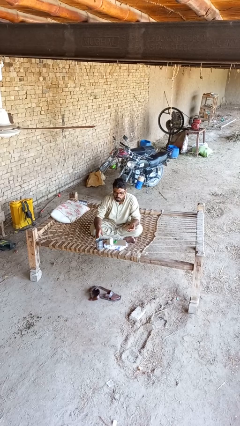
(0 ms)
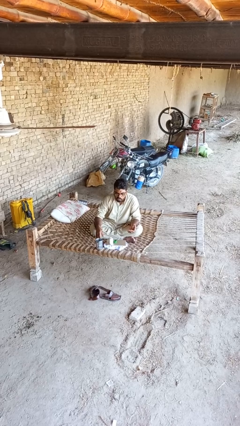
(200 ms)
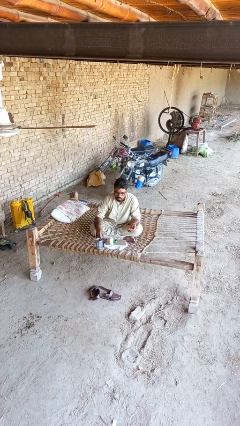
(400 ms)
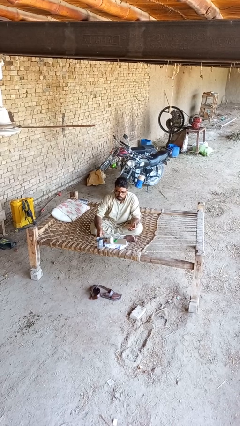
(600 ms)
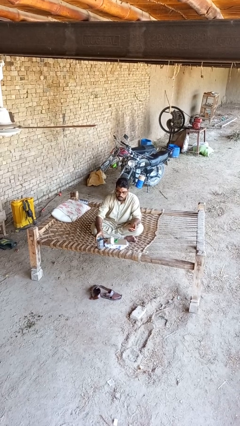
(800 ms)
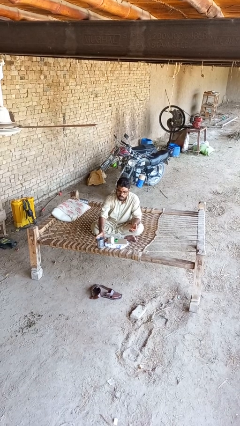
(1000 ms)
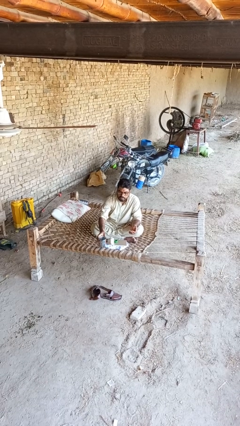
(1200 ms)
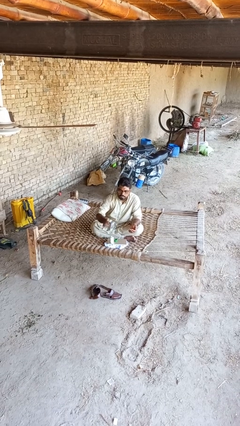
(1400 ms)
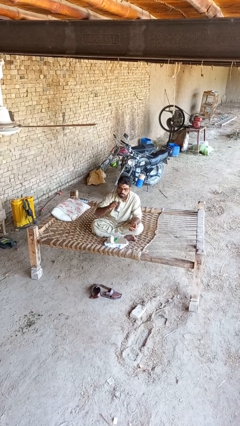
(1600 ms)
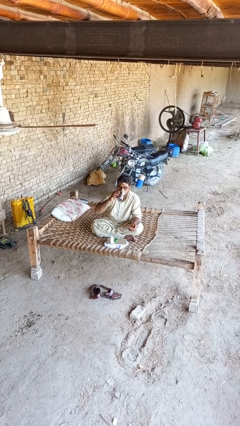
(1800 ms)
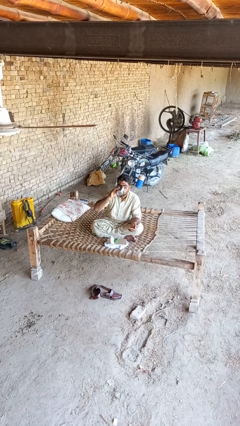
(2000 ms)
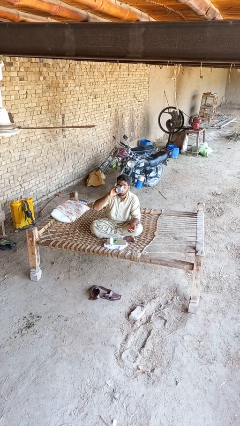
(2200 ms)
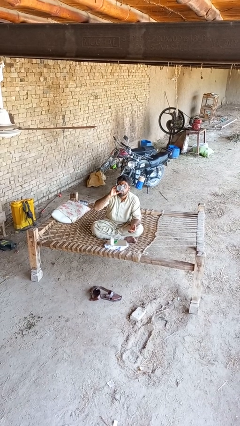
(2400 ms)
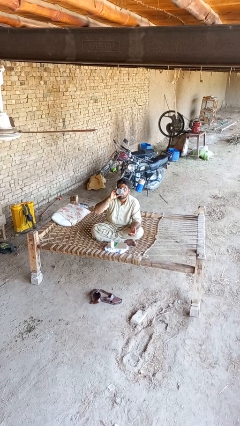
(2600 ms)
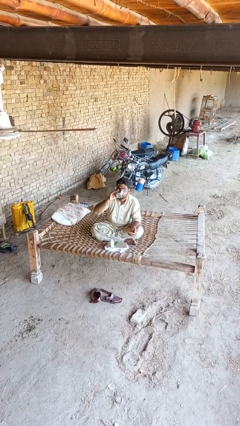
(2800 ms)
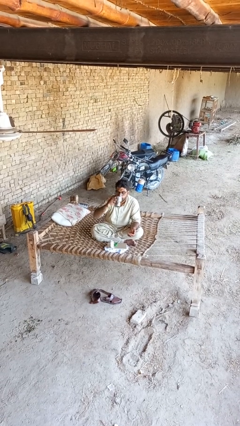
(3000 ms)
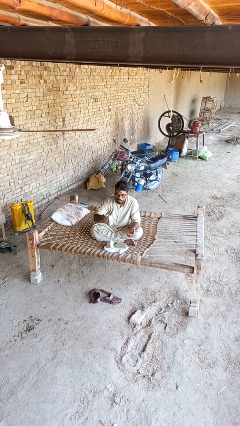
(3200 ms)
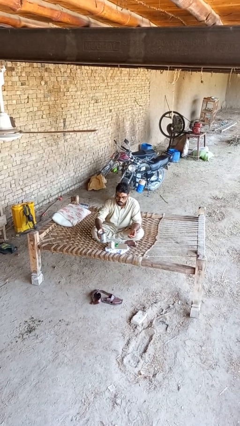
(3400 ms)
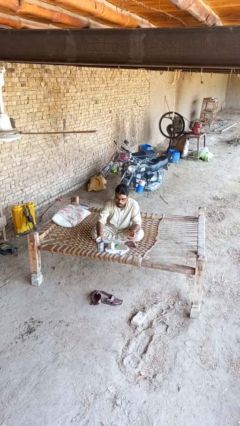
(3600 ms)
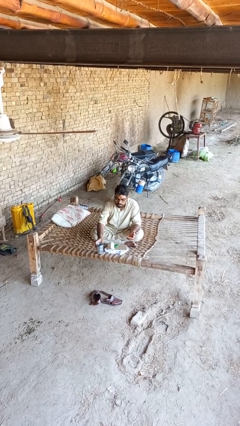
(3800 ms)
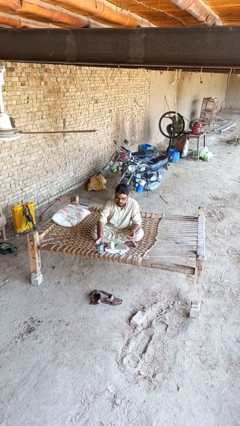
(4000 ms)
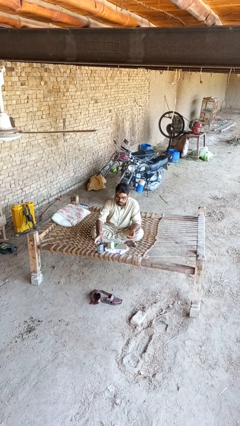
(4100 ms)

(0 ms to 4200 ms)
person drinks from cup

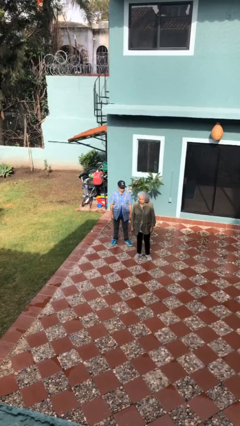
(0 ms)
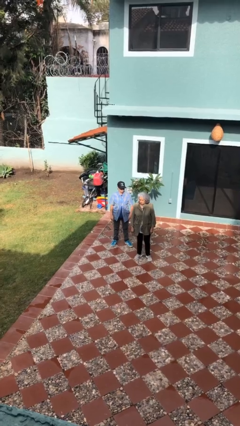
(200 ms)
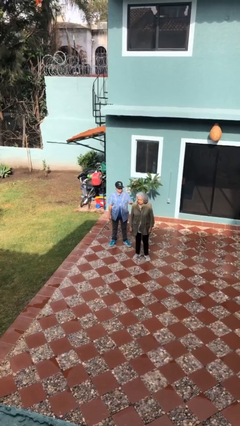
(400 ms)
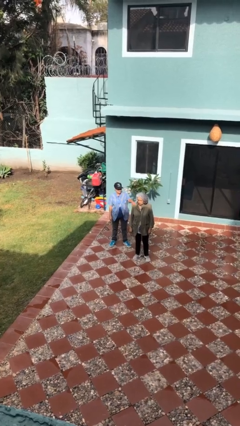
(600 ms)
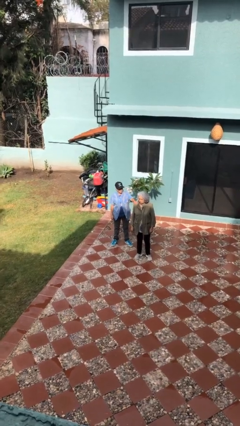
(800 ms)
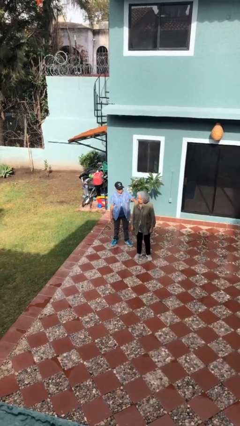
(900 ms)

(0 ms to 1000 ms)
person grabs person by shoulder

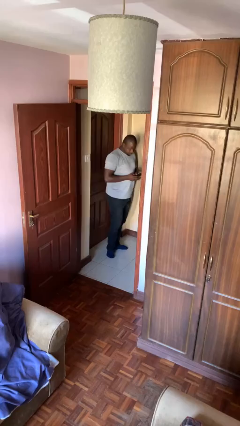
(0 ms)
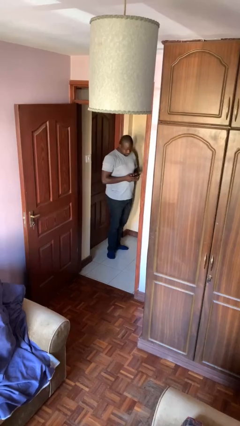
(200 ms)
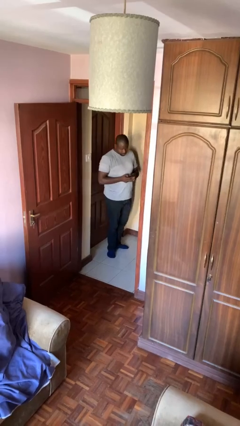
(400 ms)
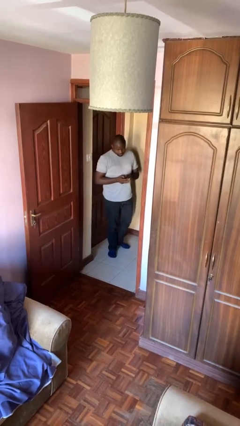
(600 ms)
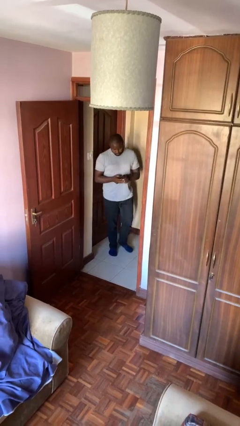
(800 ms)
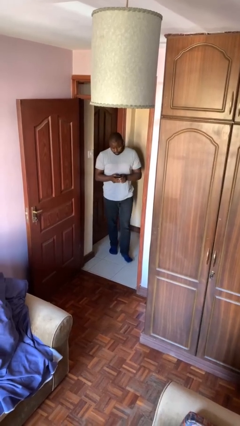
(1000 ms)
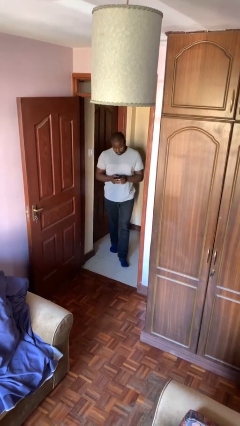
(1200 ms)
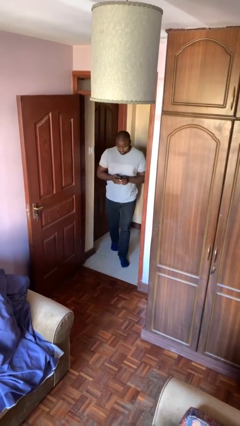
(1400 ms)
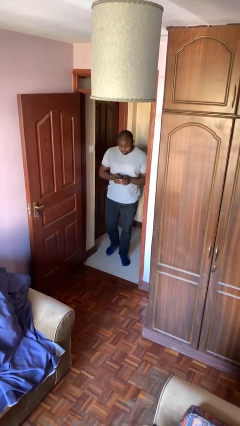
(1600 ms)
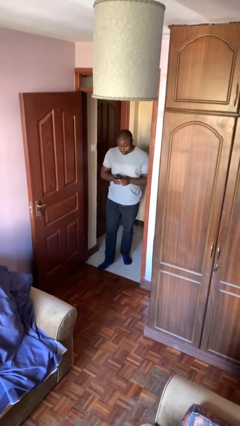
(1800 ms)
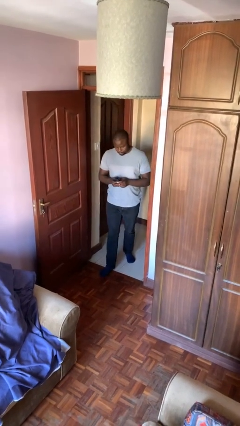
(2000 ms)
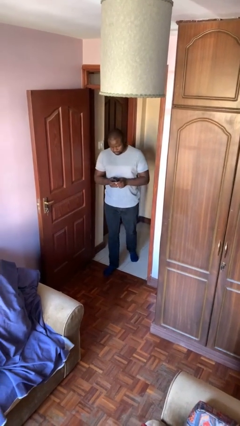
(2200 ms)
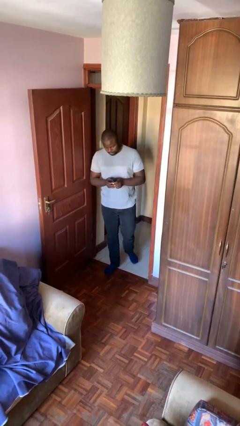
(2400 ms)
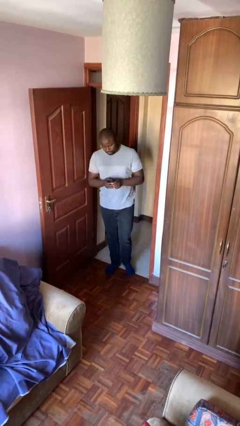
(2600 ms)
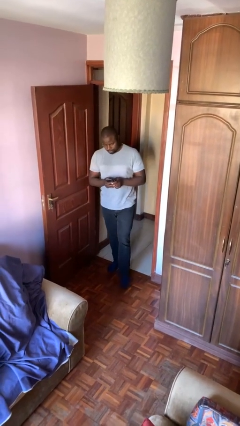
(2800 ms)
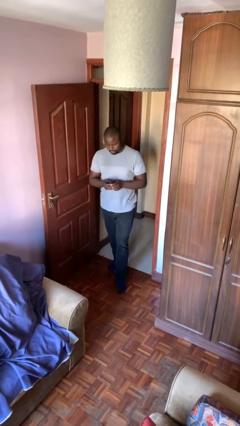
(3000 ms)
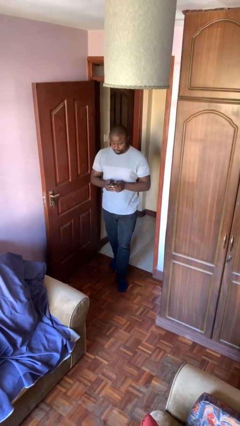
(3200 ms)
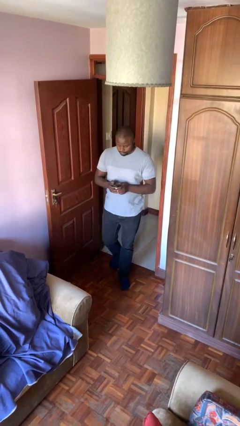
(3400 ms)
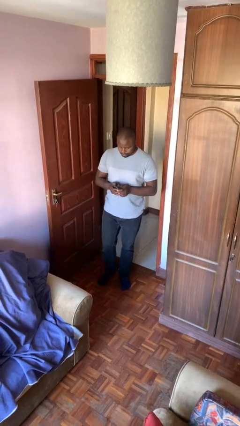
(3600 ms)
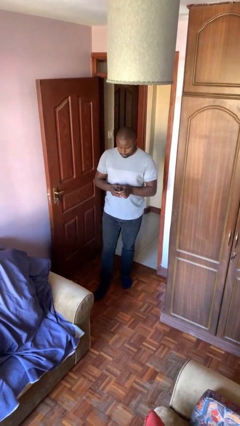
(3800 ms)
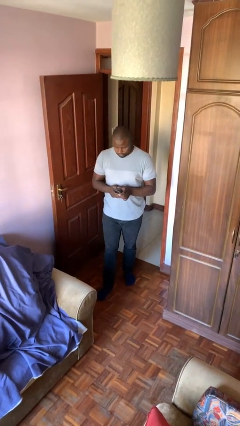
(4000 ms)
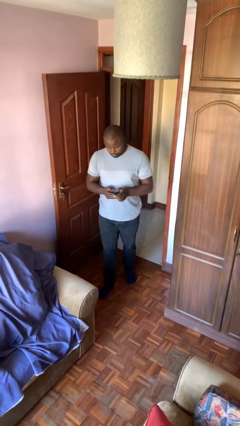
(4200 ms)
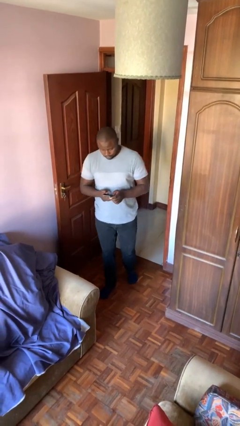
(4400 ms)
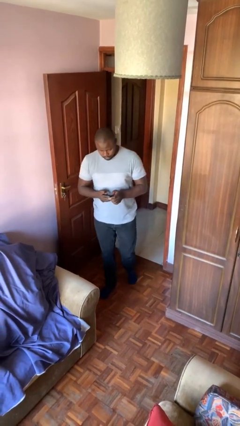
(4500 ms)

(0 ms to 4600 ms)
person enters scene through structure

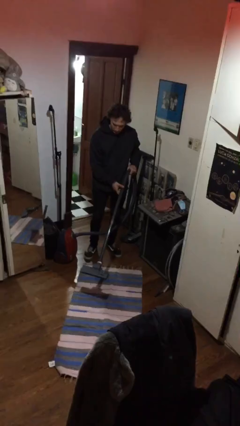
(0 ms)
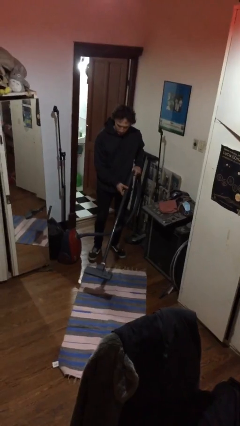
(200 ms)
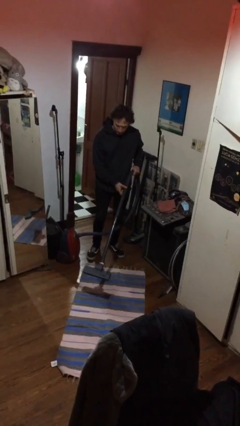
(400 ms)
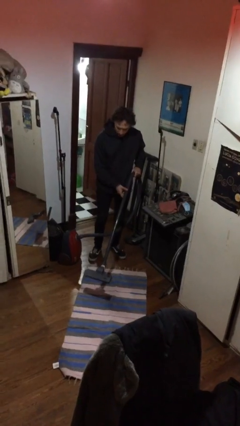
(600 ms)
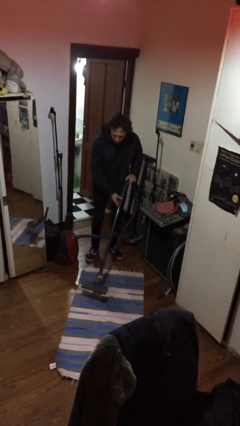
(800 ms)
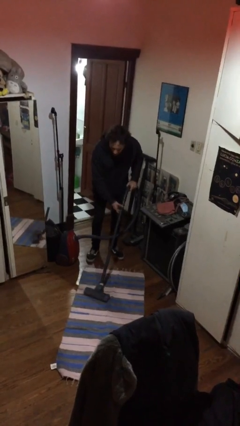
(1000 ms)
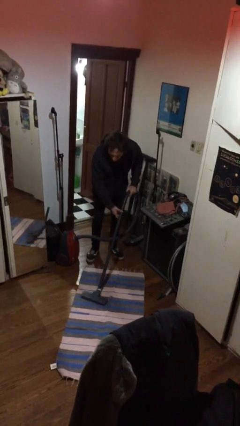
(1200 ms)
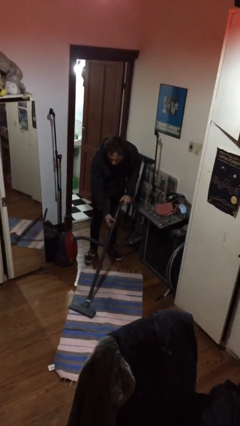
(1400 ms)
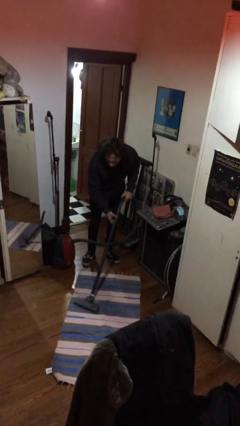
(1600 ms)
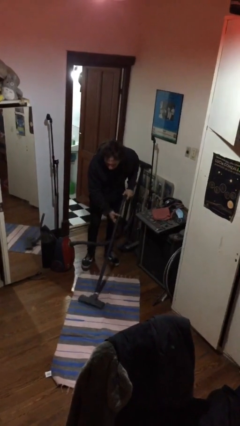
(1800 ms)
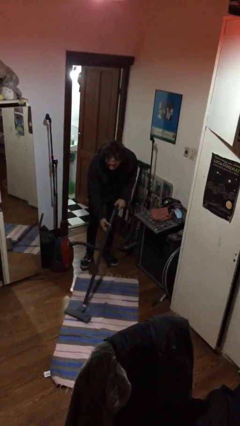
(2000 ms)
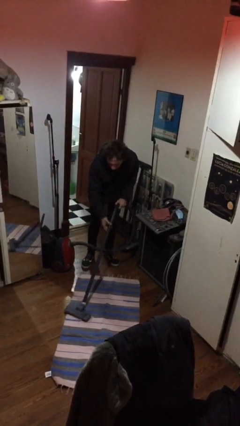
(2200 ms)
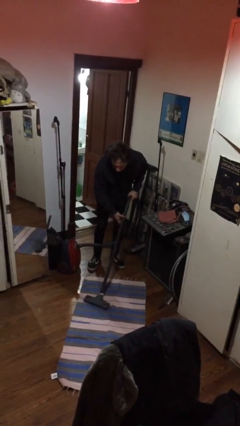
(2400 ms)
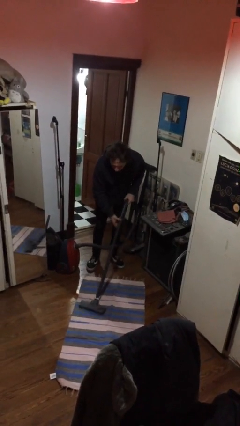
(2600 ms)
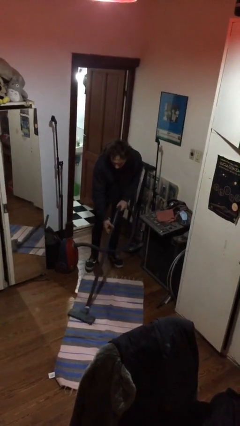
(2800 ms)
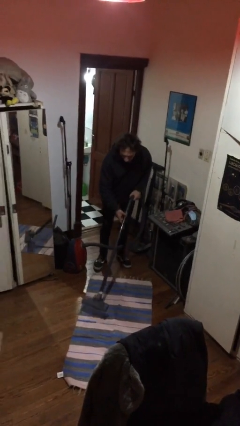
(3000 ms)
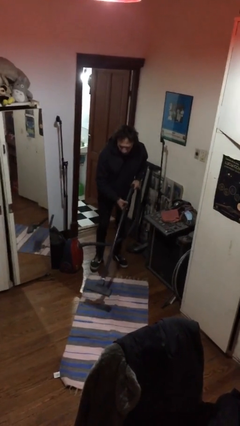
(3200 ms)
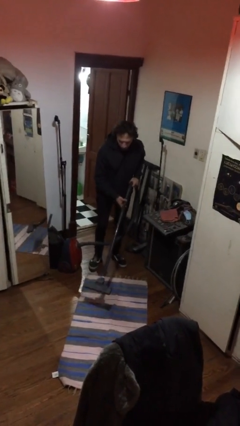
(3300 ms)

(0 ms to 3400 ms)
person vacuums carpet

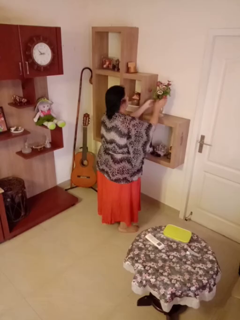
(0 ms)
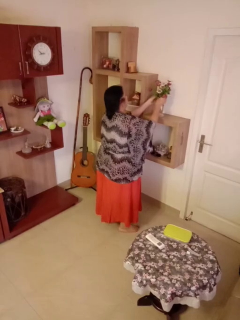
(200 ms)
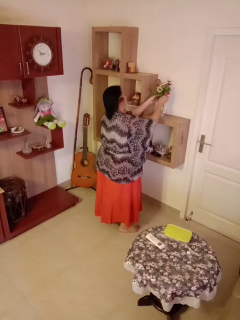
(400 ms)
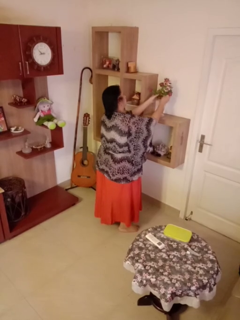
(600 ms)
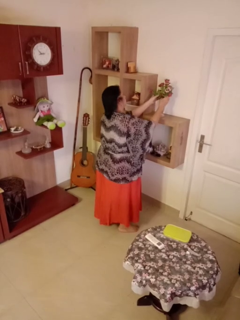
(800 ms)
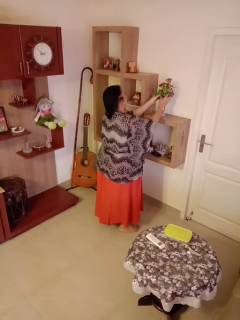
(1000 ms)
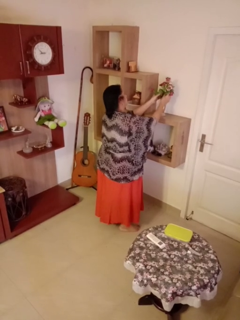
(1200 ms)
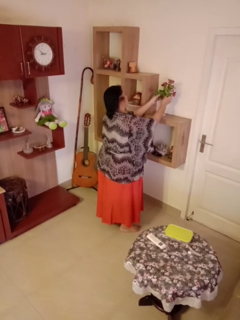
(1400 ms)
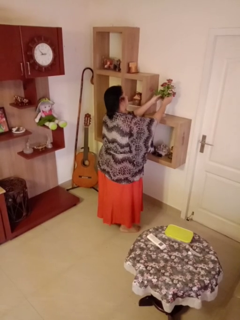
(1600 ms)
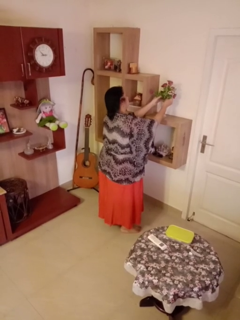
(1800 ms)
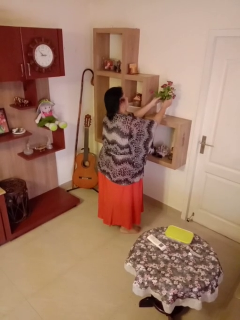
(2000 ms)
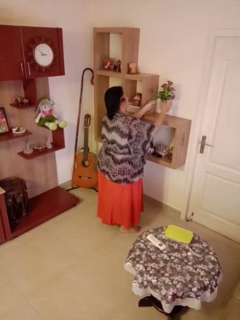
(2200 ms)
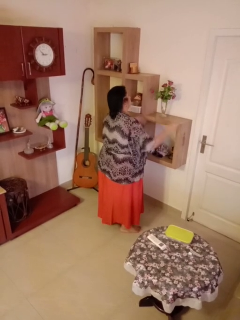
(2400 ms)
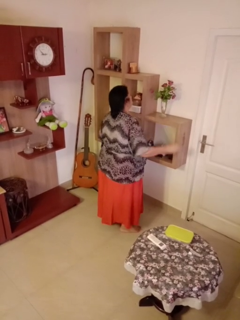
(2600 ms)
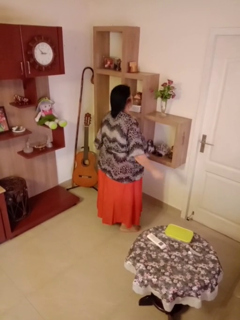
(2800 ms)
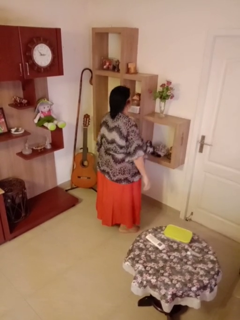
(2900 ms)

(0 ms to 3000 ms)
person arranges flowers in vase

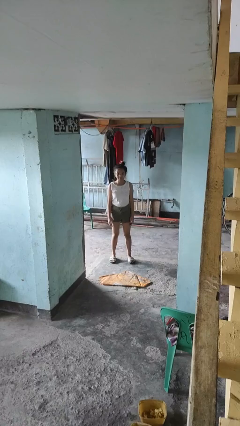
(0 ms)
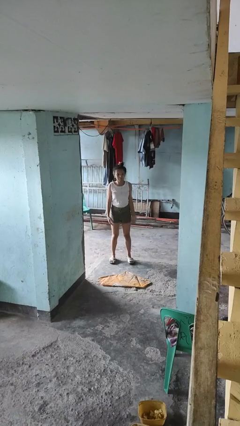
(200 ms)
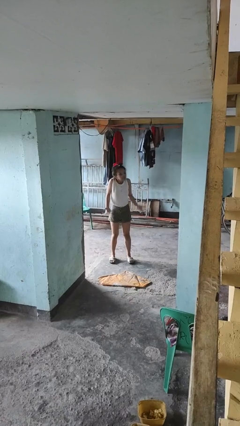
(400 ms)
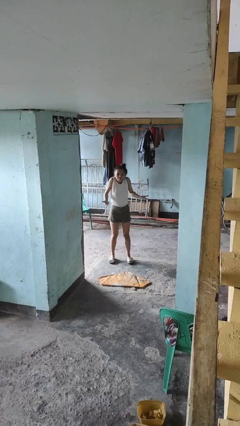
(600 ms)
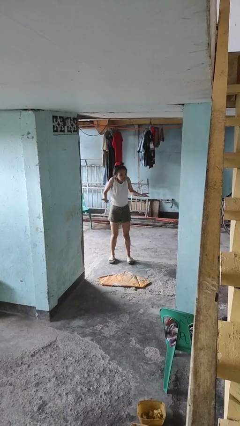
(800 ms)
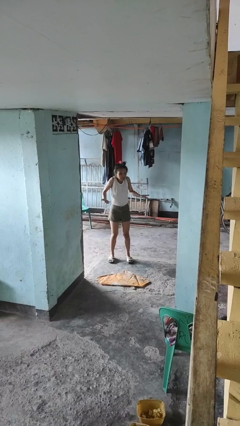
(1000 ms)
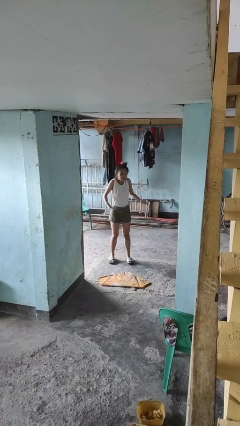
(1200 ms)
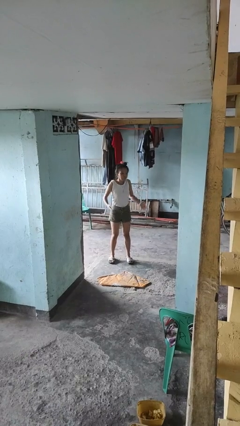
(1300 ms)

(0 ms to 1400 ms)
person shrugs

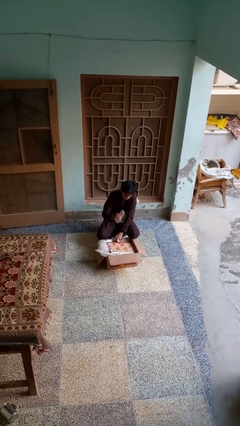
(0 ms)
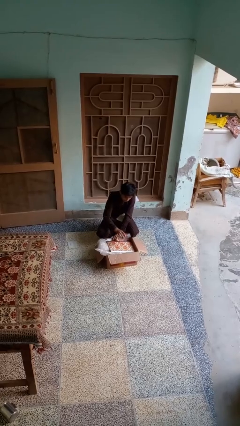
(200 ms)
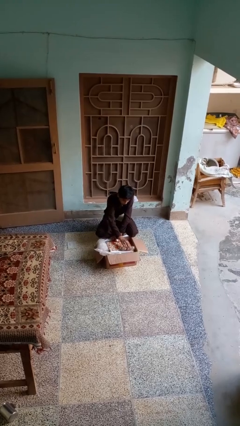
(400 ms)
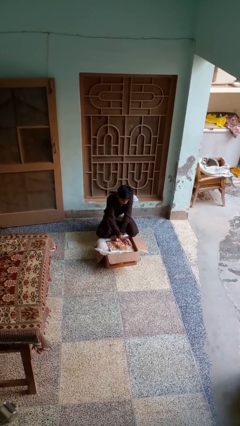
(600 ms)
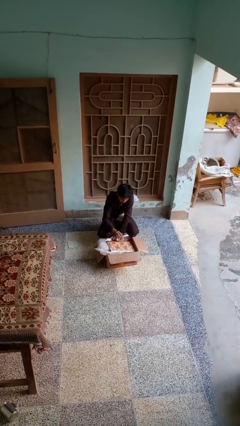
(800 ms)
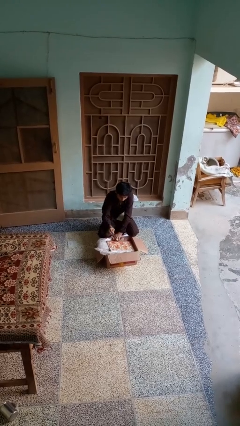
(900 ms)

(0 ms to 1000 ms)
person puts object into box
